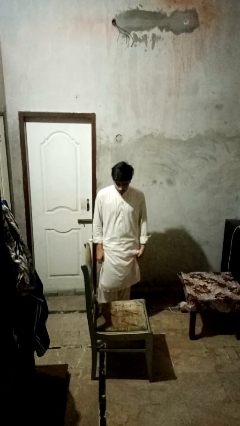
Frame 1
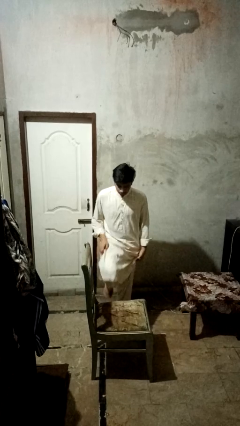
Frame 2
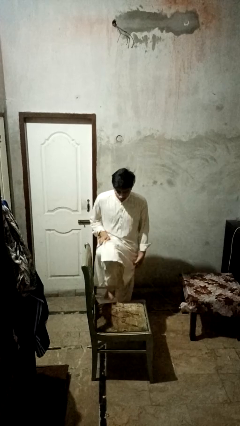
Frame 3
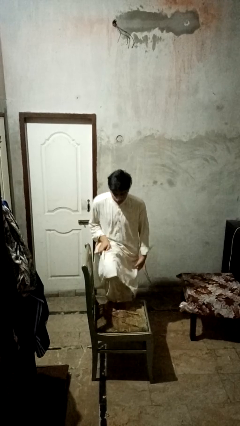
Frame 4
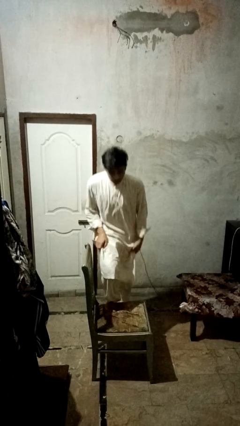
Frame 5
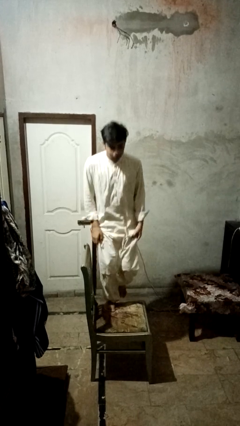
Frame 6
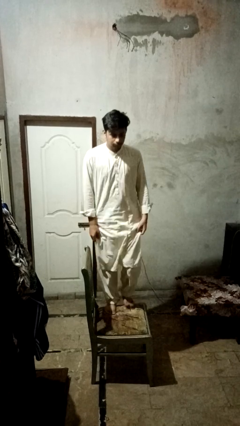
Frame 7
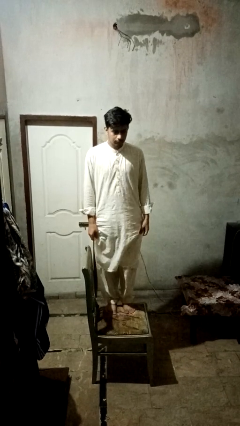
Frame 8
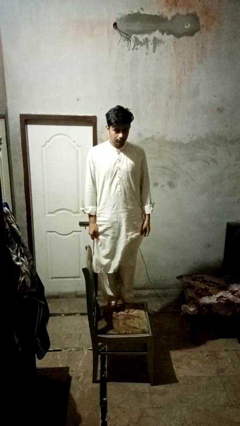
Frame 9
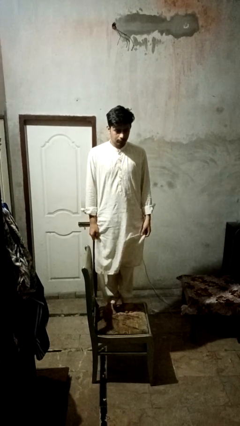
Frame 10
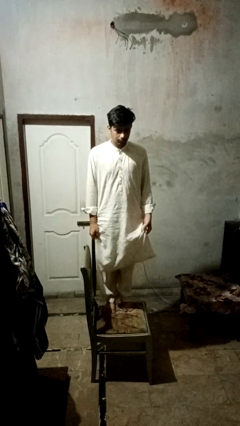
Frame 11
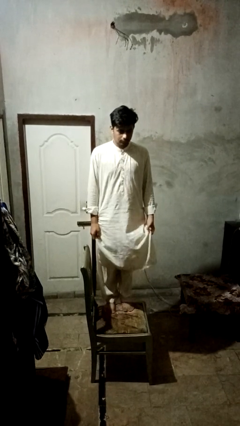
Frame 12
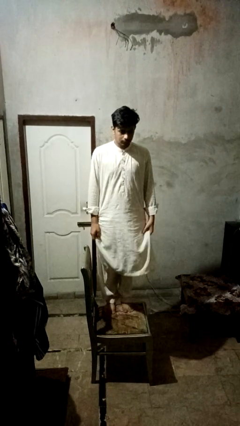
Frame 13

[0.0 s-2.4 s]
person climbs on chair

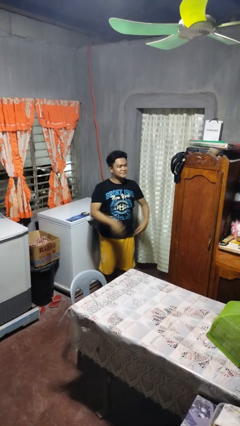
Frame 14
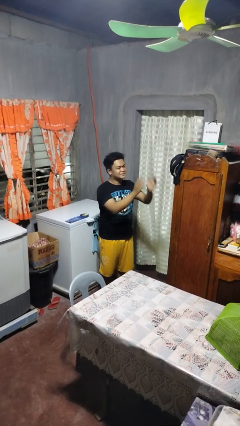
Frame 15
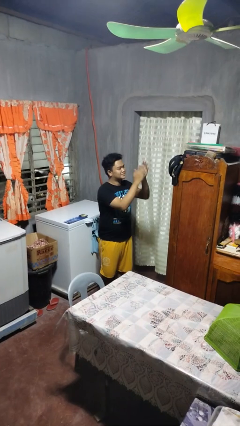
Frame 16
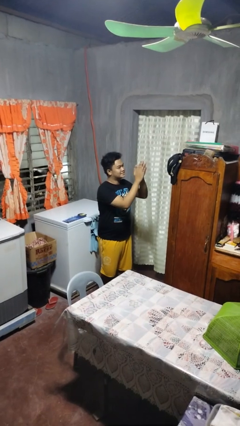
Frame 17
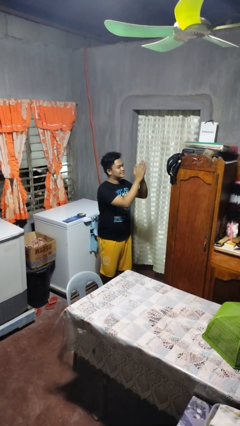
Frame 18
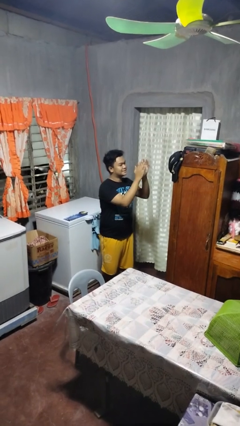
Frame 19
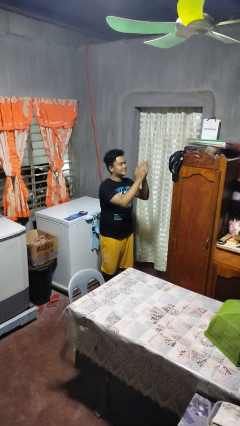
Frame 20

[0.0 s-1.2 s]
person claps hands

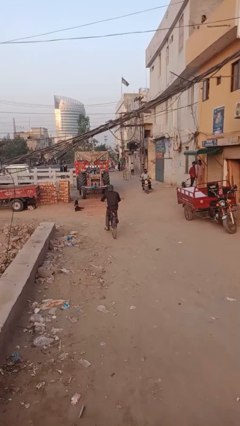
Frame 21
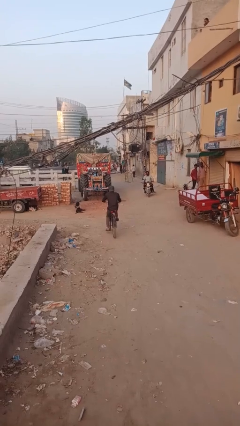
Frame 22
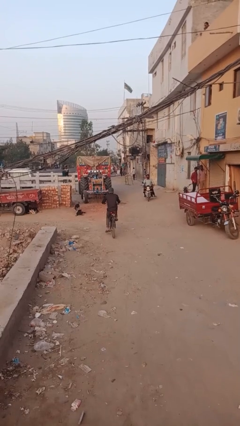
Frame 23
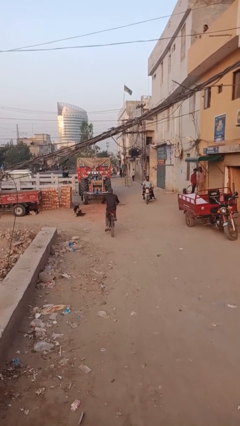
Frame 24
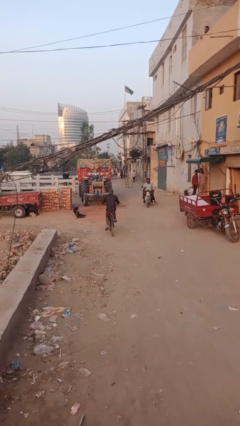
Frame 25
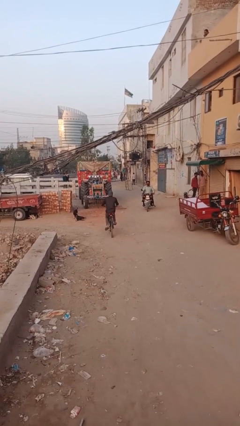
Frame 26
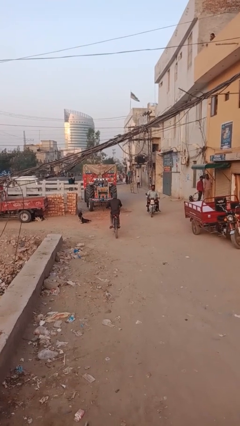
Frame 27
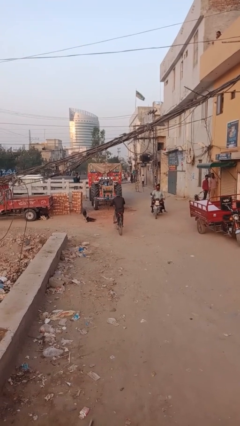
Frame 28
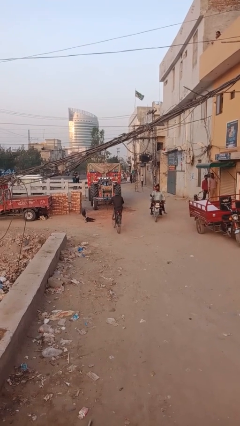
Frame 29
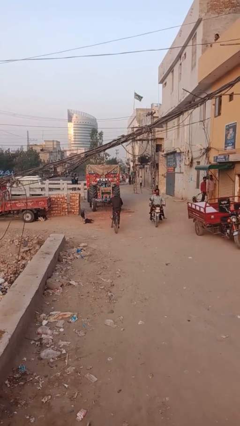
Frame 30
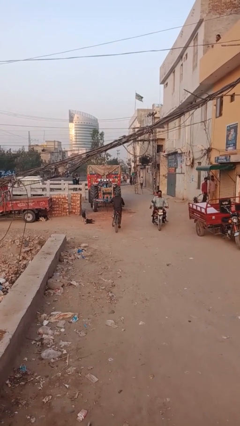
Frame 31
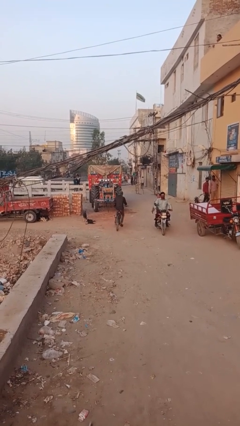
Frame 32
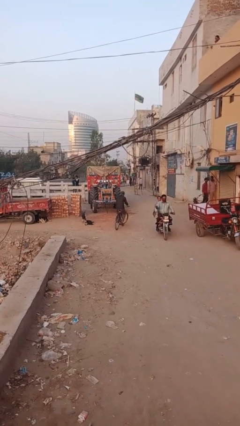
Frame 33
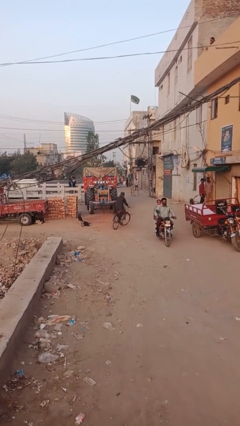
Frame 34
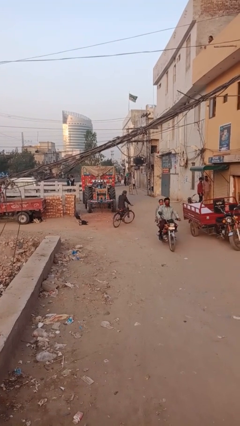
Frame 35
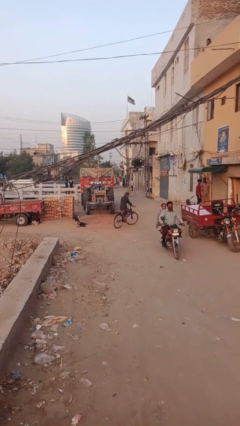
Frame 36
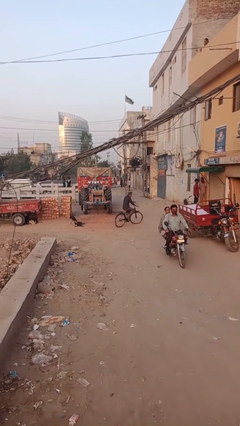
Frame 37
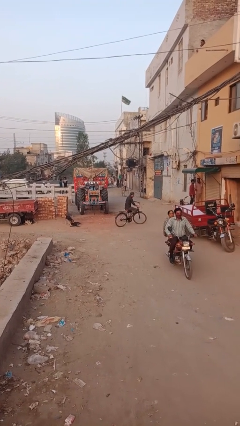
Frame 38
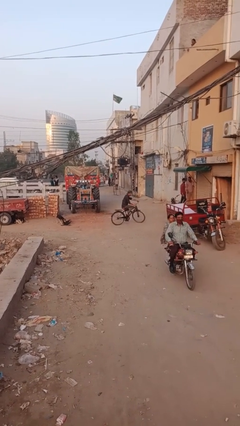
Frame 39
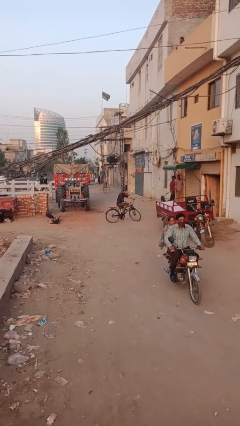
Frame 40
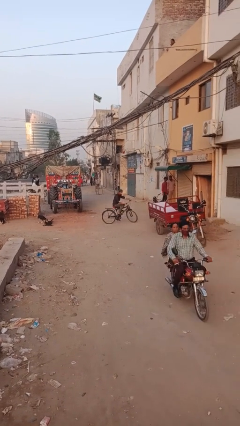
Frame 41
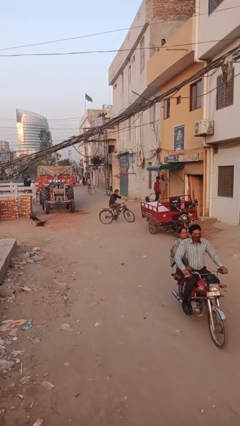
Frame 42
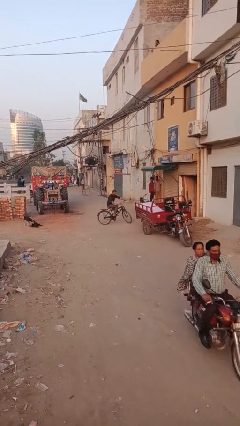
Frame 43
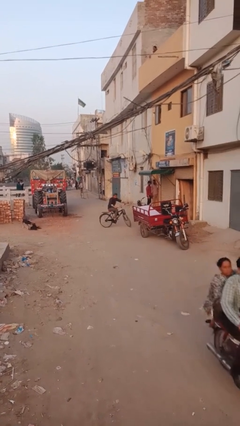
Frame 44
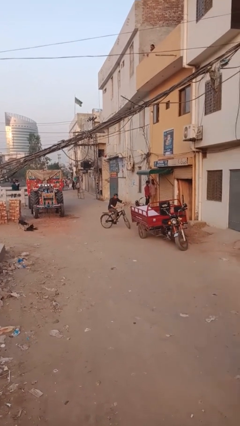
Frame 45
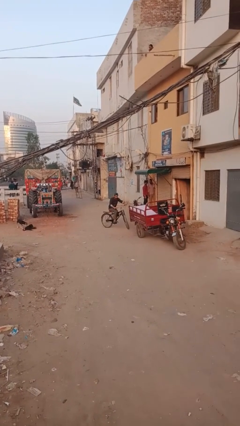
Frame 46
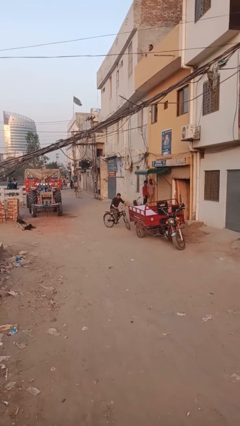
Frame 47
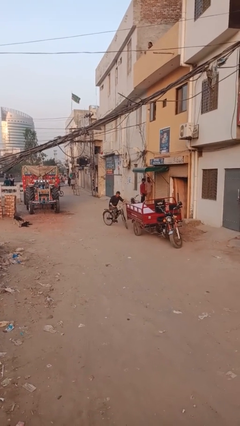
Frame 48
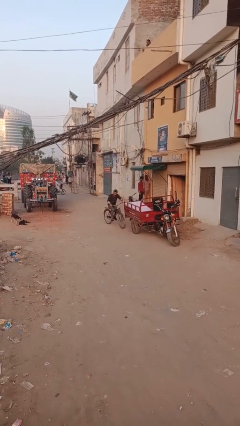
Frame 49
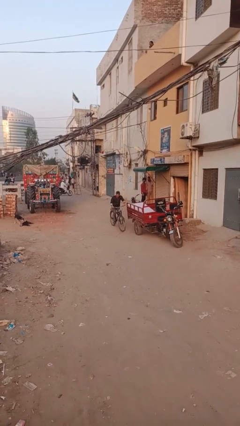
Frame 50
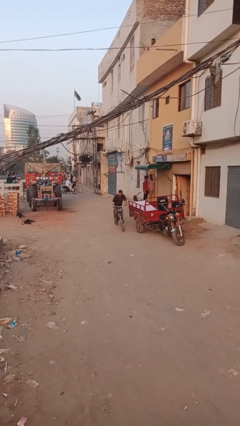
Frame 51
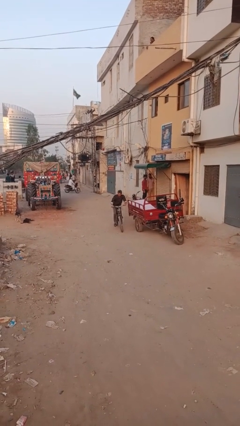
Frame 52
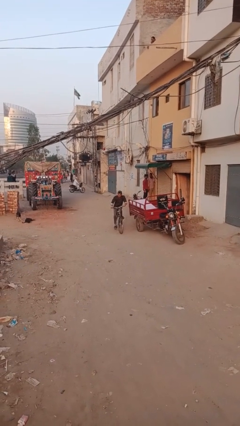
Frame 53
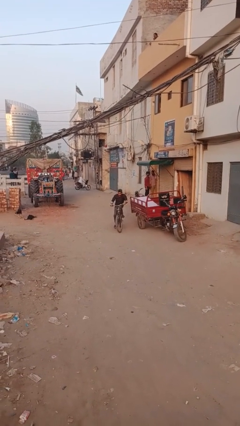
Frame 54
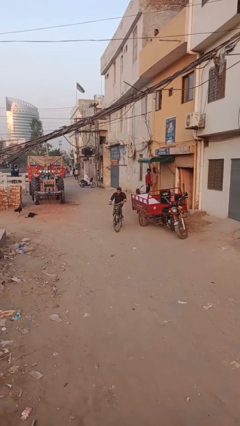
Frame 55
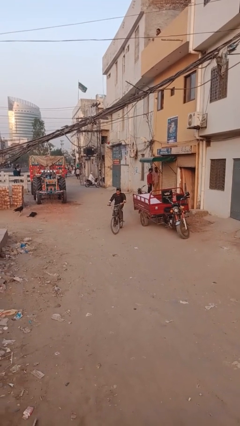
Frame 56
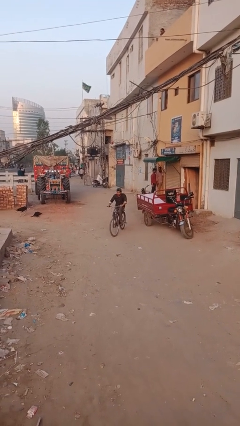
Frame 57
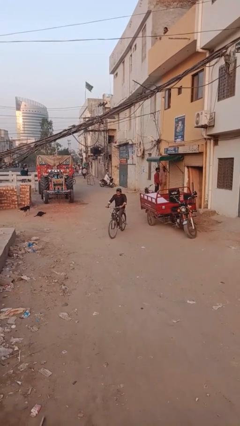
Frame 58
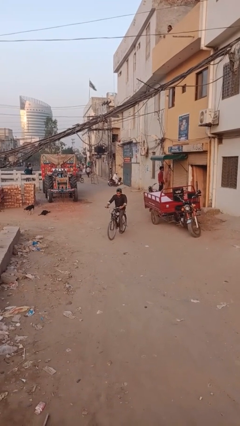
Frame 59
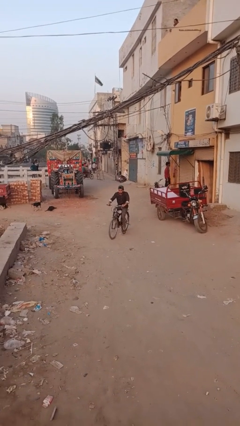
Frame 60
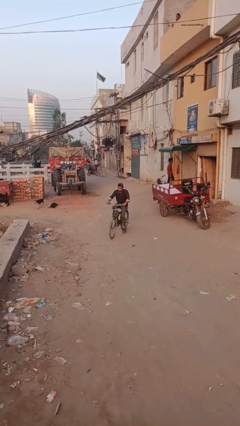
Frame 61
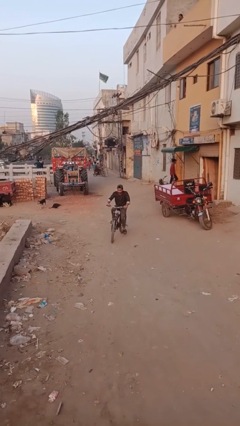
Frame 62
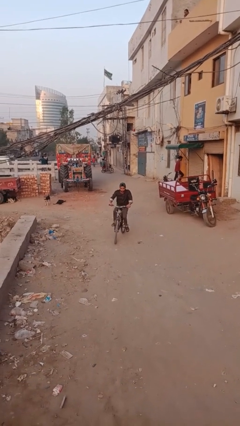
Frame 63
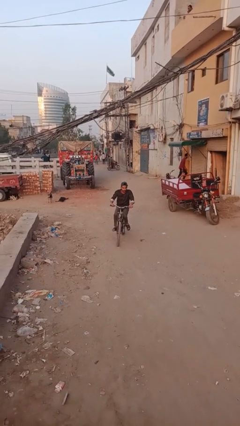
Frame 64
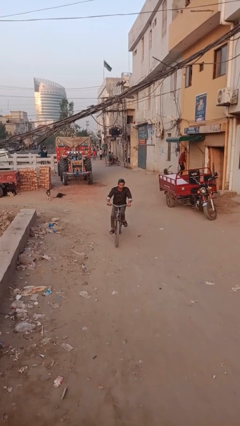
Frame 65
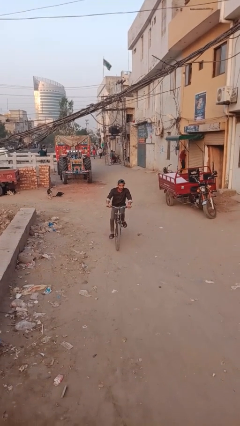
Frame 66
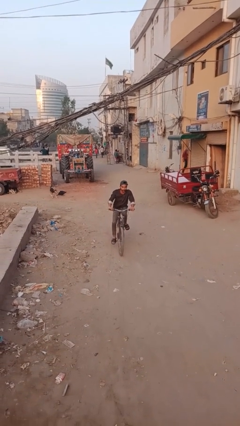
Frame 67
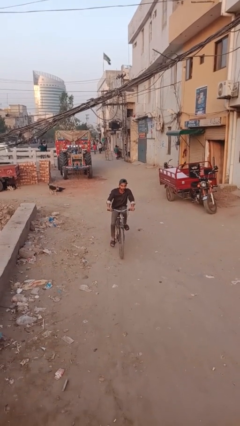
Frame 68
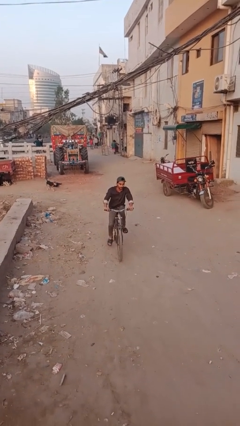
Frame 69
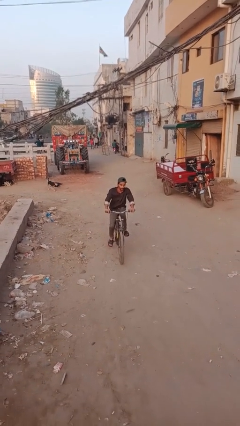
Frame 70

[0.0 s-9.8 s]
person rides bicycle

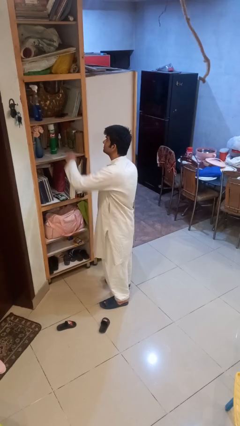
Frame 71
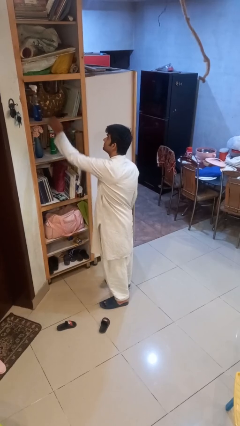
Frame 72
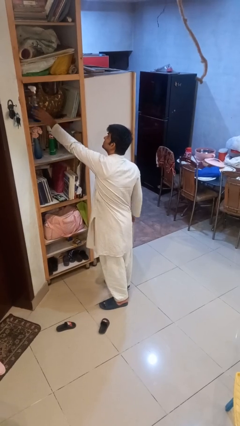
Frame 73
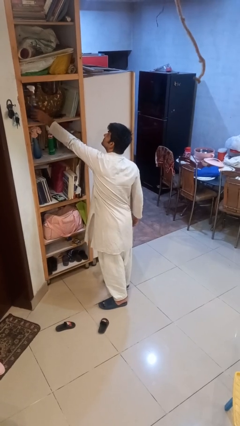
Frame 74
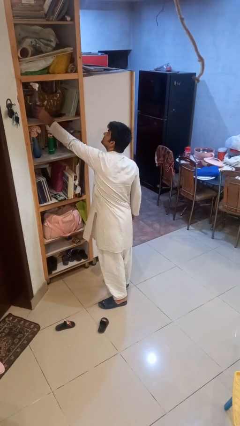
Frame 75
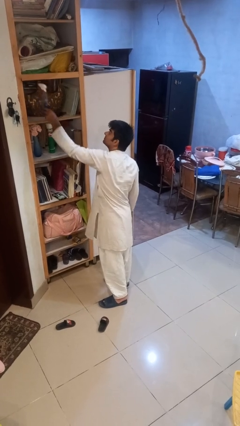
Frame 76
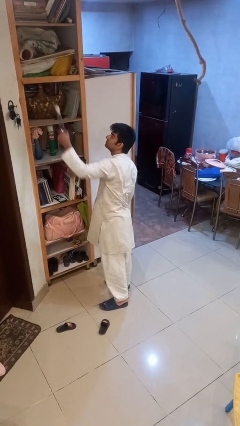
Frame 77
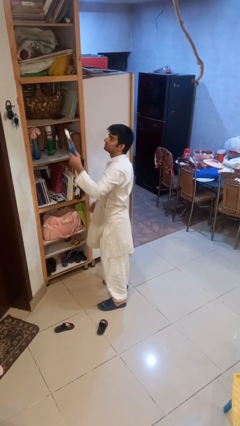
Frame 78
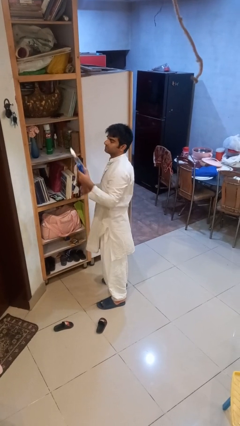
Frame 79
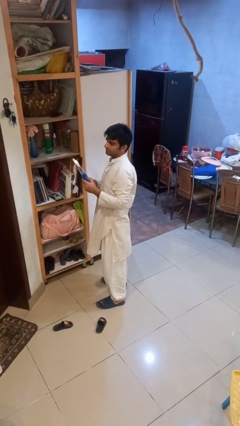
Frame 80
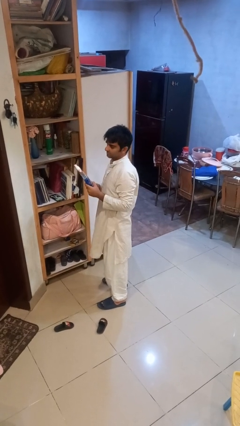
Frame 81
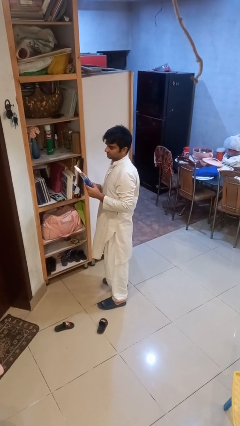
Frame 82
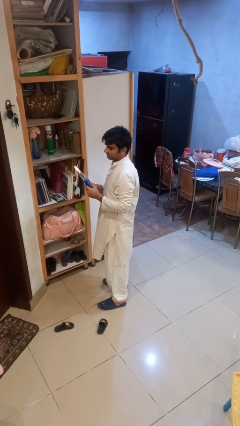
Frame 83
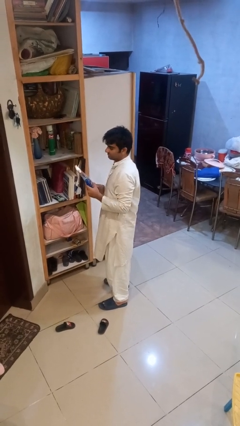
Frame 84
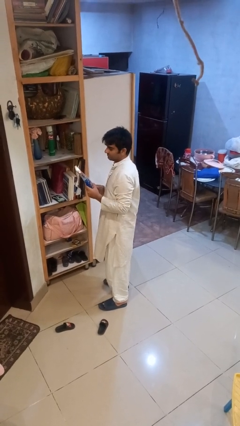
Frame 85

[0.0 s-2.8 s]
person picks up object from shelf

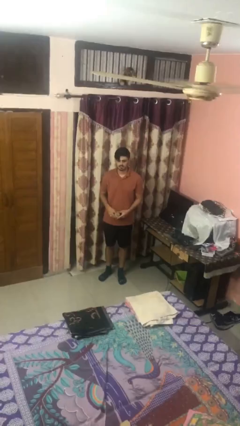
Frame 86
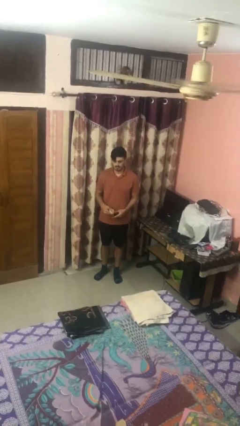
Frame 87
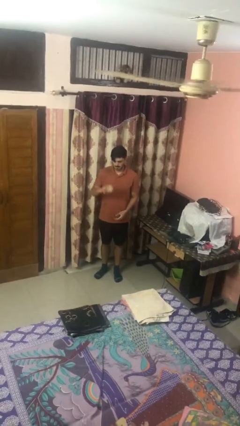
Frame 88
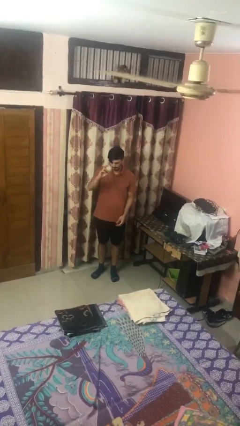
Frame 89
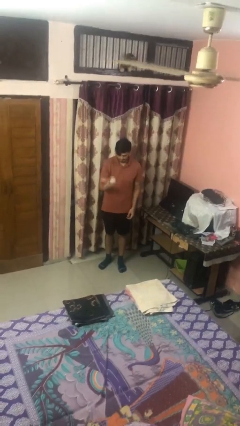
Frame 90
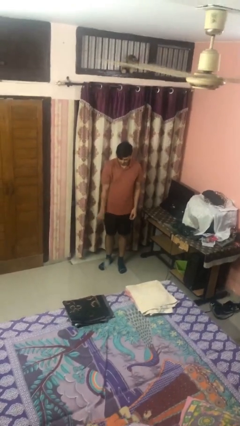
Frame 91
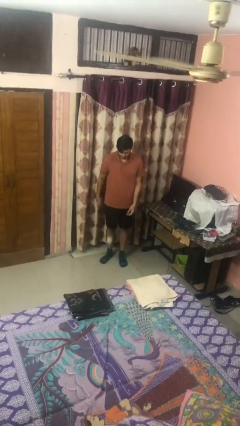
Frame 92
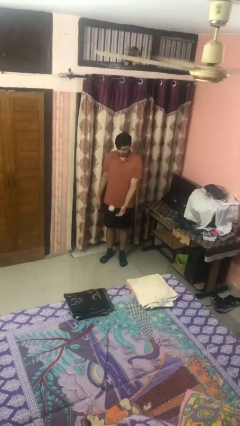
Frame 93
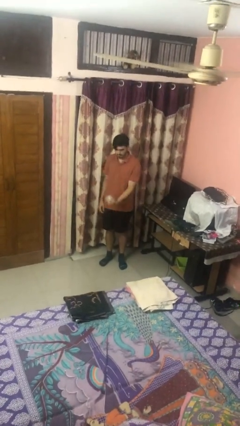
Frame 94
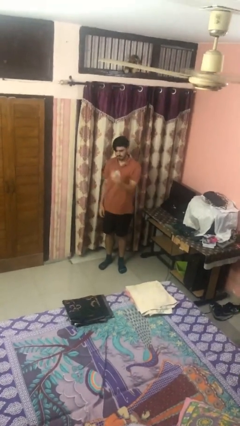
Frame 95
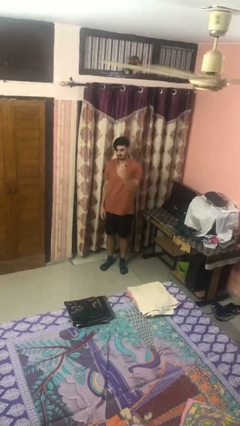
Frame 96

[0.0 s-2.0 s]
person bounces ball on floor
